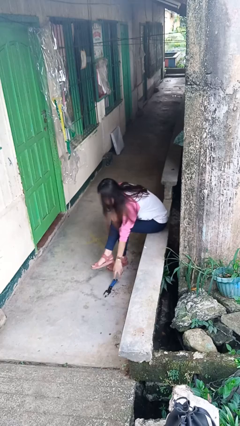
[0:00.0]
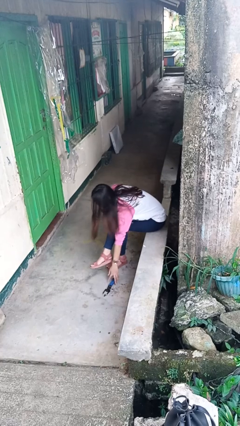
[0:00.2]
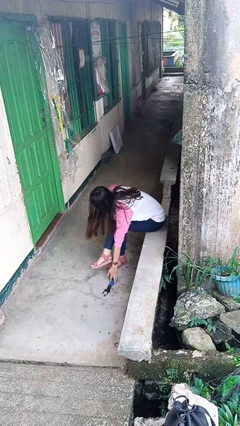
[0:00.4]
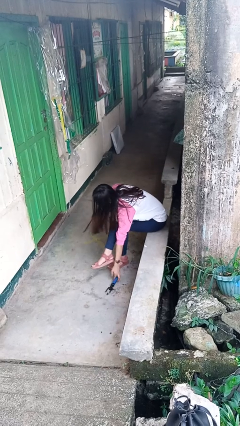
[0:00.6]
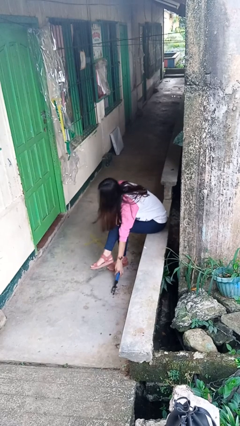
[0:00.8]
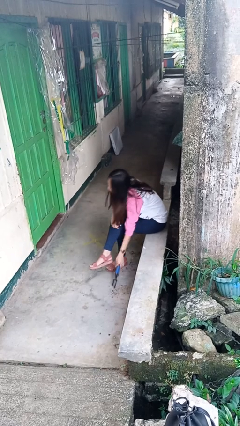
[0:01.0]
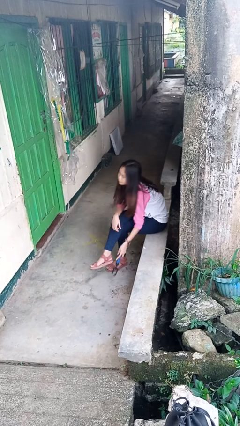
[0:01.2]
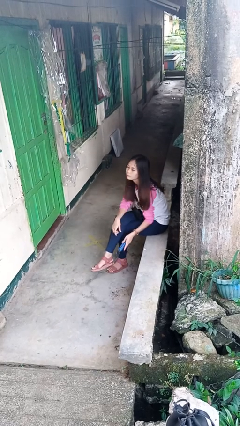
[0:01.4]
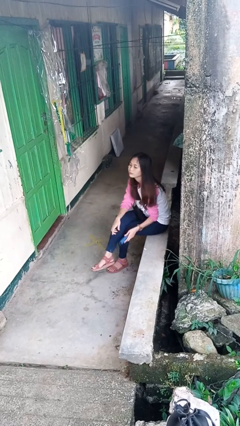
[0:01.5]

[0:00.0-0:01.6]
person picks up object from floor

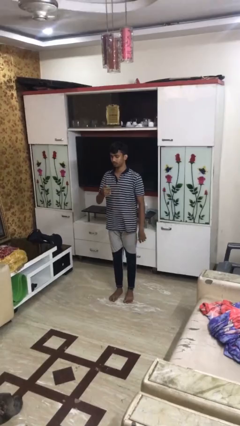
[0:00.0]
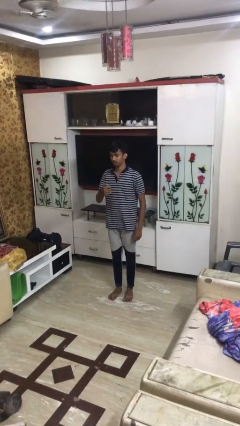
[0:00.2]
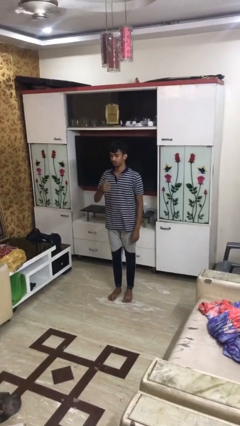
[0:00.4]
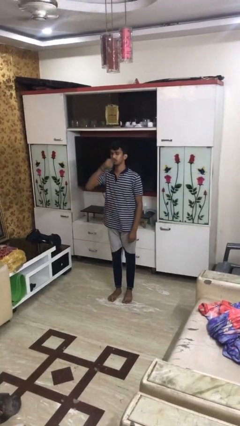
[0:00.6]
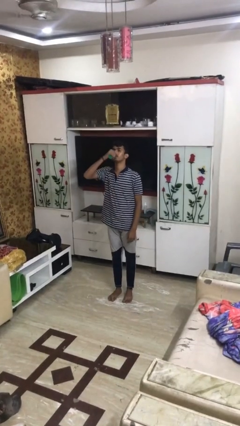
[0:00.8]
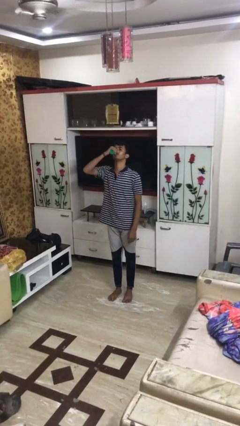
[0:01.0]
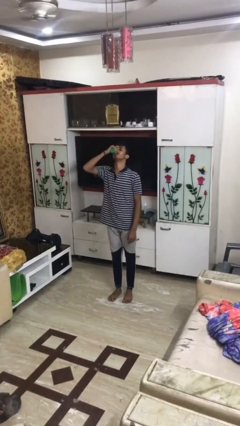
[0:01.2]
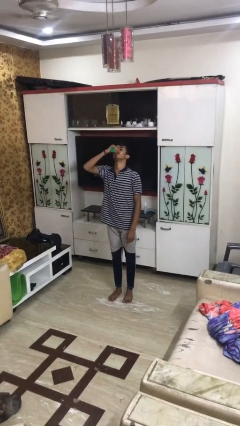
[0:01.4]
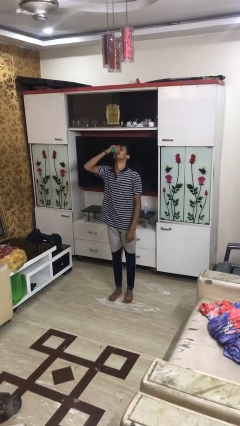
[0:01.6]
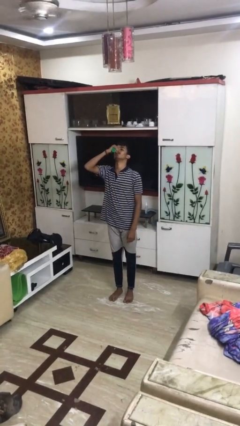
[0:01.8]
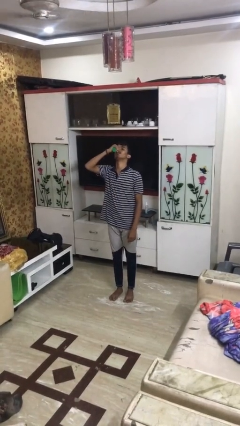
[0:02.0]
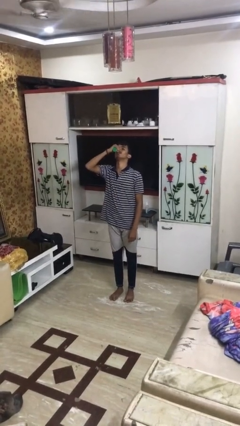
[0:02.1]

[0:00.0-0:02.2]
person drinks from beverage can

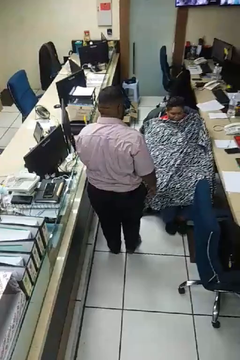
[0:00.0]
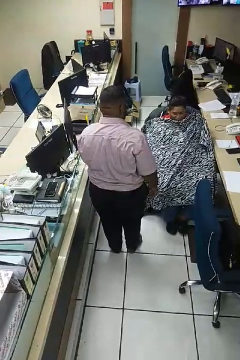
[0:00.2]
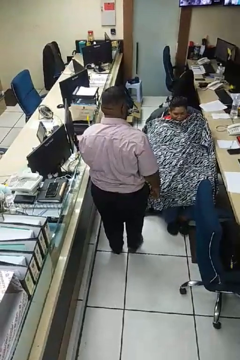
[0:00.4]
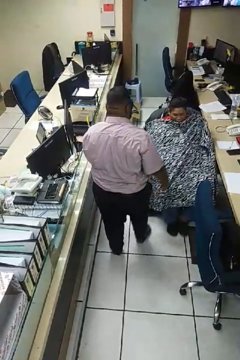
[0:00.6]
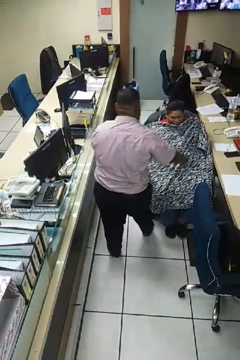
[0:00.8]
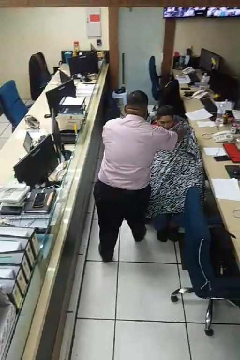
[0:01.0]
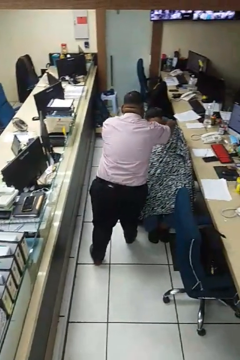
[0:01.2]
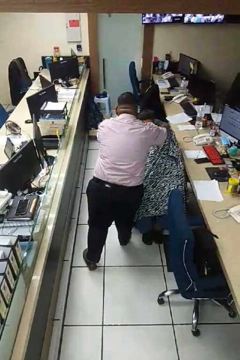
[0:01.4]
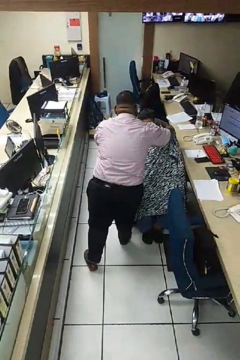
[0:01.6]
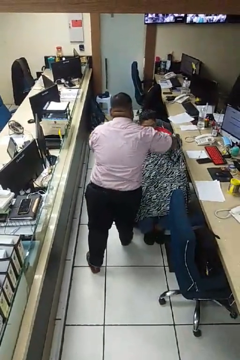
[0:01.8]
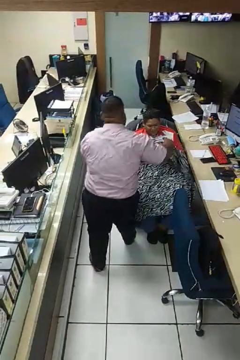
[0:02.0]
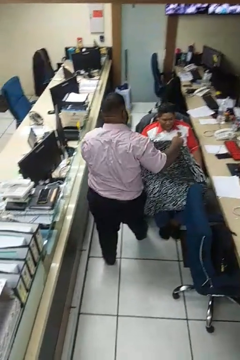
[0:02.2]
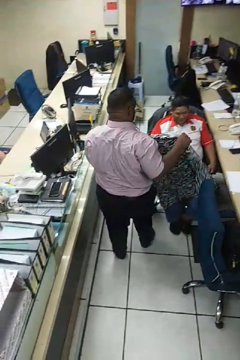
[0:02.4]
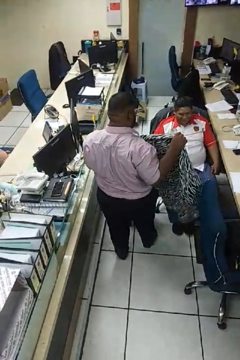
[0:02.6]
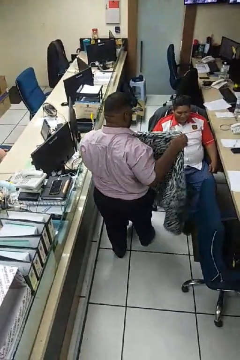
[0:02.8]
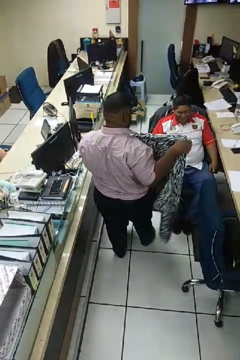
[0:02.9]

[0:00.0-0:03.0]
person uncovers friend with blanket

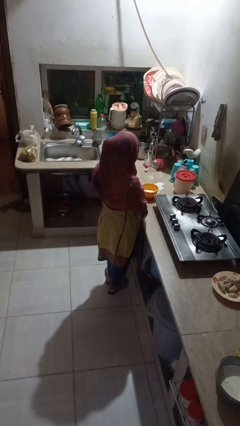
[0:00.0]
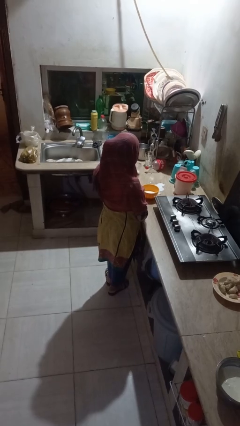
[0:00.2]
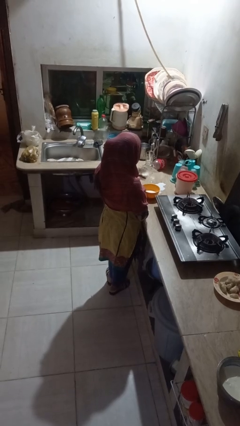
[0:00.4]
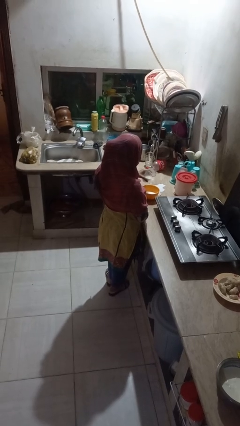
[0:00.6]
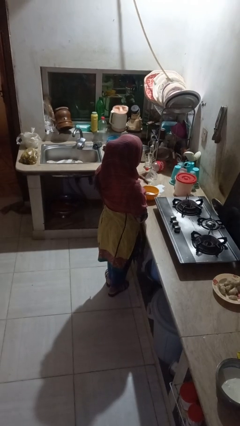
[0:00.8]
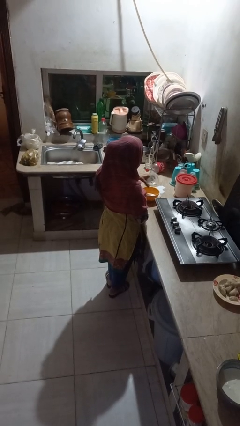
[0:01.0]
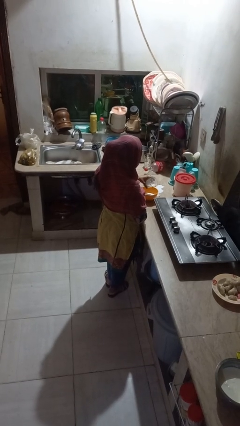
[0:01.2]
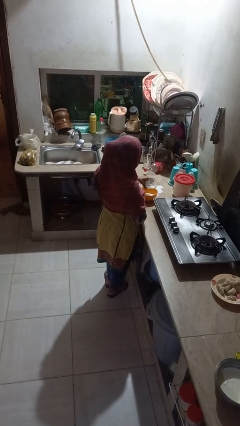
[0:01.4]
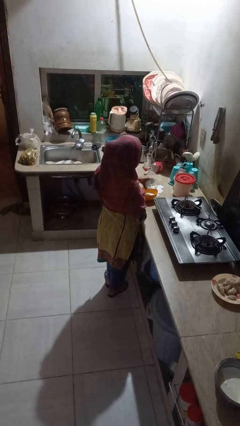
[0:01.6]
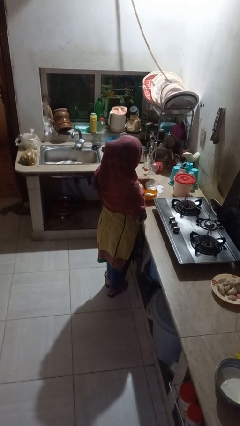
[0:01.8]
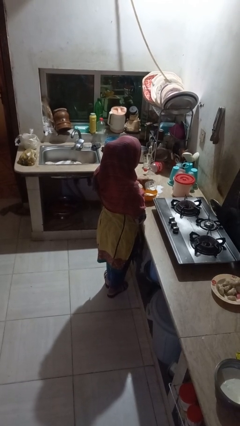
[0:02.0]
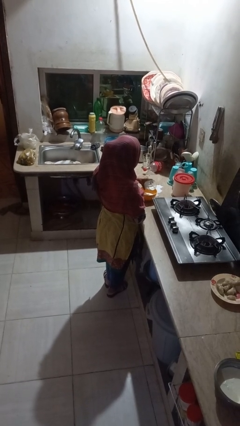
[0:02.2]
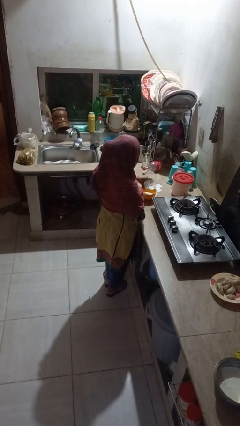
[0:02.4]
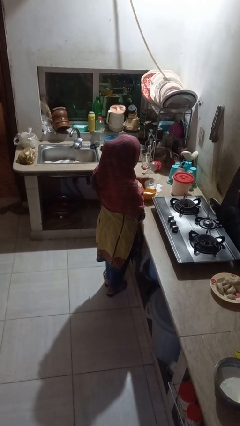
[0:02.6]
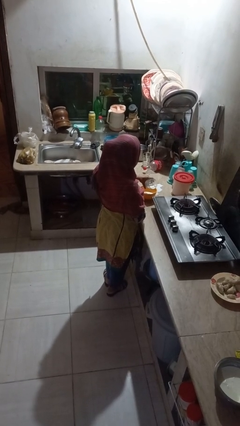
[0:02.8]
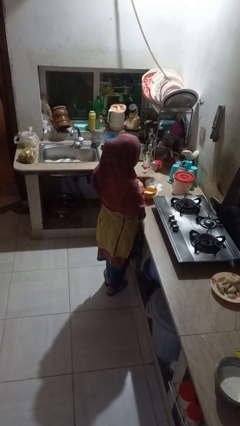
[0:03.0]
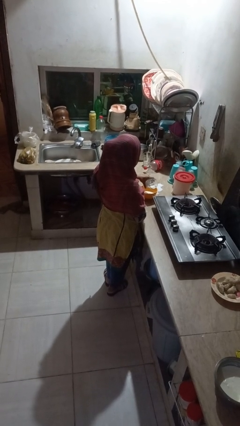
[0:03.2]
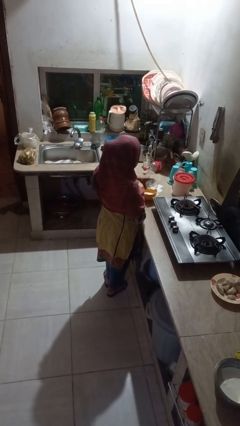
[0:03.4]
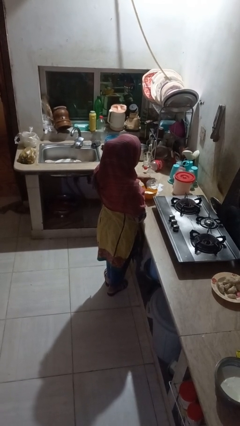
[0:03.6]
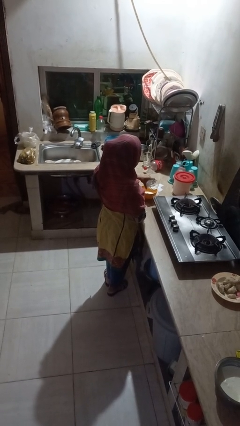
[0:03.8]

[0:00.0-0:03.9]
person pours into bowl

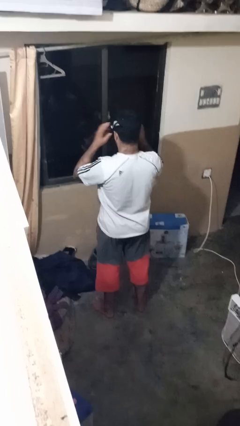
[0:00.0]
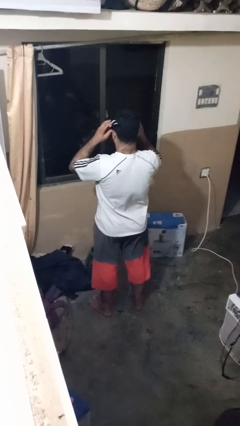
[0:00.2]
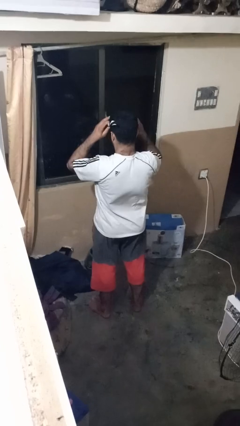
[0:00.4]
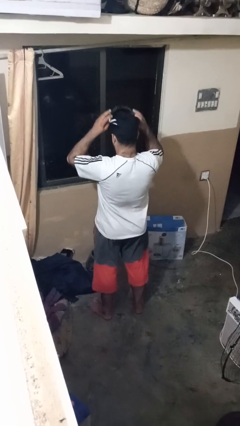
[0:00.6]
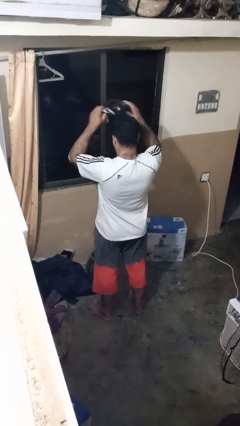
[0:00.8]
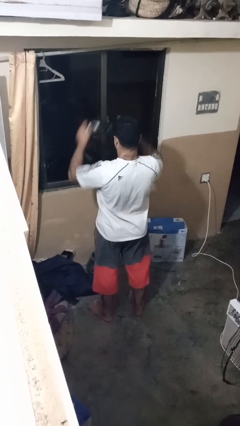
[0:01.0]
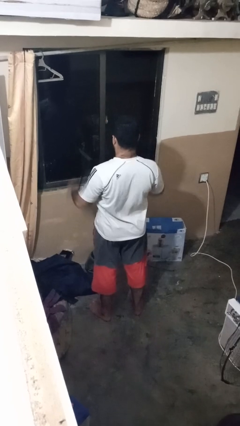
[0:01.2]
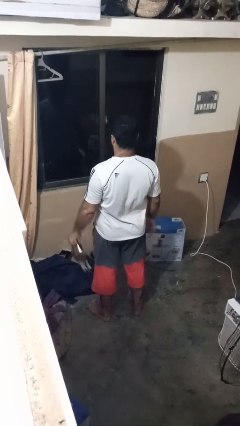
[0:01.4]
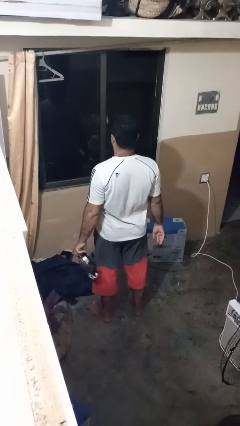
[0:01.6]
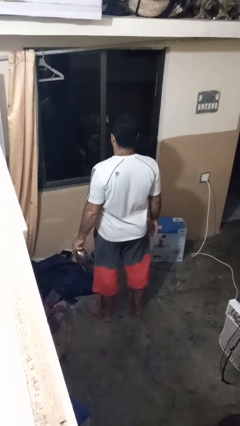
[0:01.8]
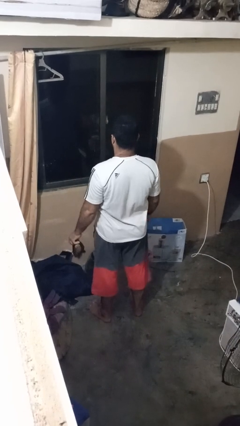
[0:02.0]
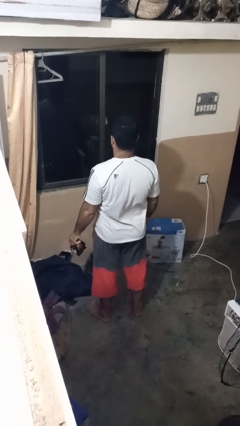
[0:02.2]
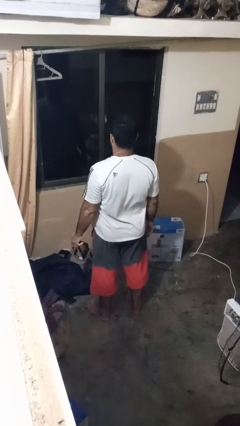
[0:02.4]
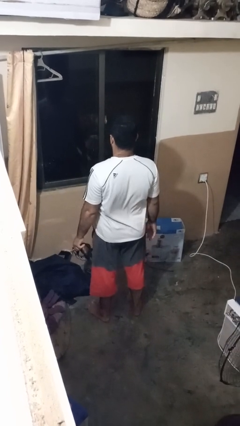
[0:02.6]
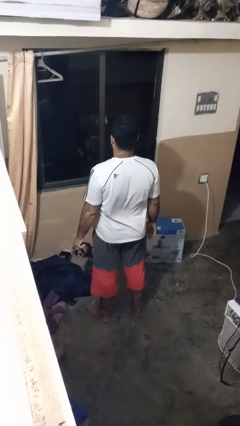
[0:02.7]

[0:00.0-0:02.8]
person takes off sunglasses

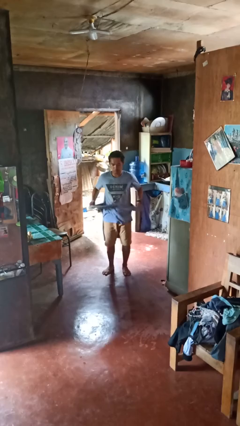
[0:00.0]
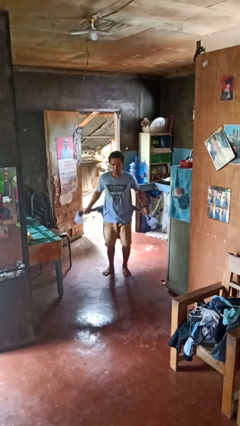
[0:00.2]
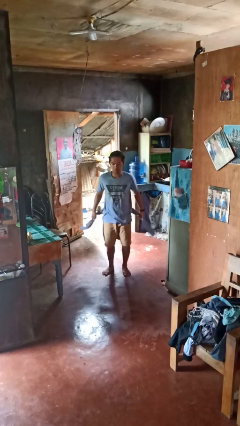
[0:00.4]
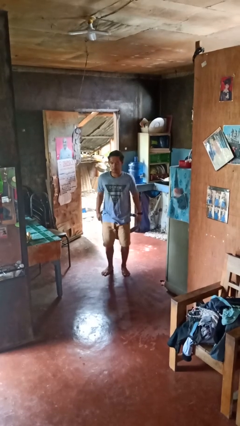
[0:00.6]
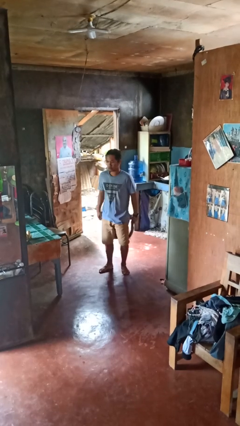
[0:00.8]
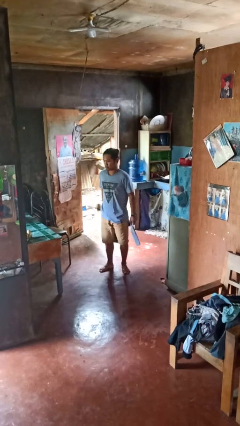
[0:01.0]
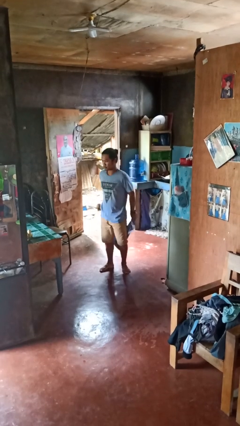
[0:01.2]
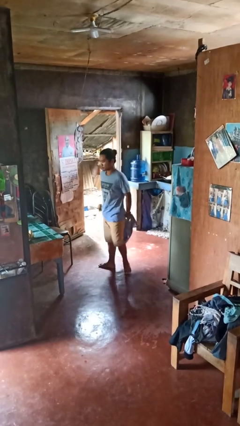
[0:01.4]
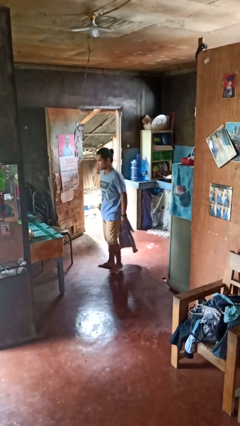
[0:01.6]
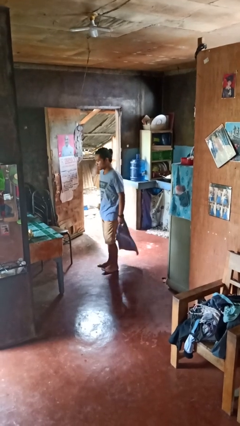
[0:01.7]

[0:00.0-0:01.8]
person unties jacket around waist

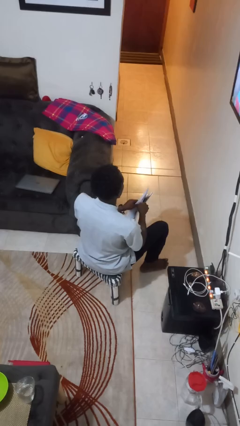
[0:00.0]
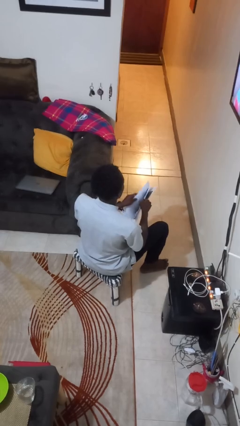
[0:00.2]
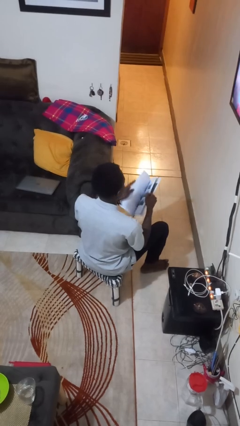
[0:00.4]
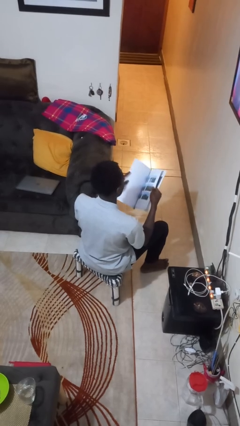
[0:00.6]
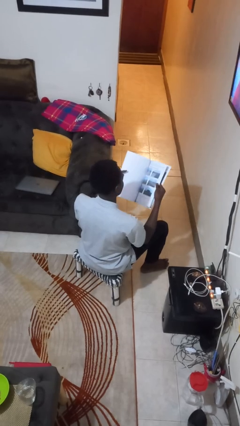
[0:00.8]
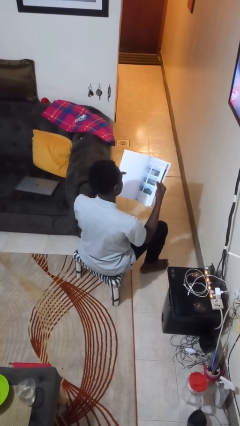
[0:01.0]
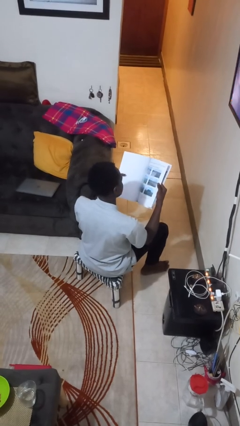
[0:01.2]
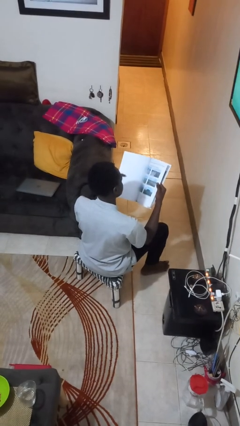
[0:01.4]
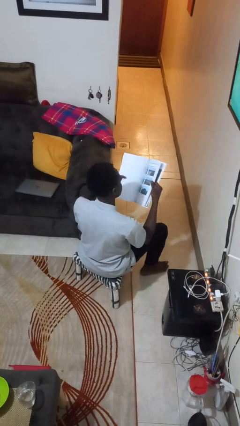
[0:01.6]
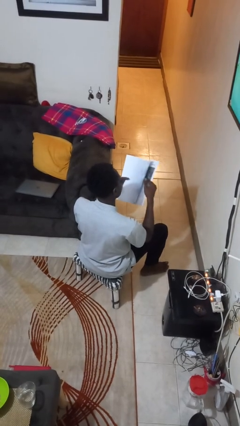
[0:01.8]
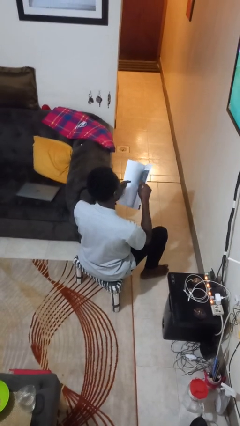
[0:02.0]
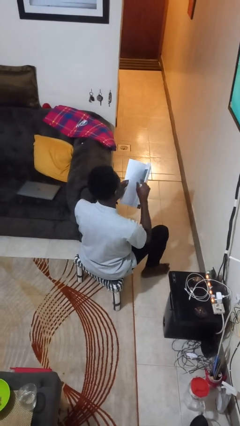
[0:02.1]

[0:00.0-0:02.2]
person reads magazine

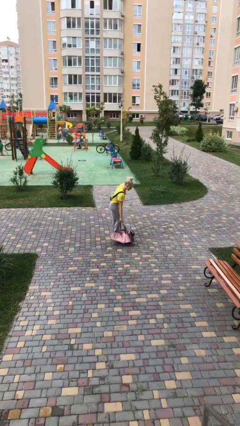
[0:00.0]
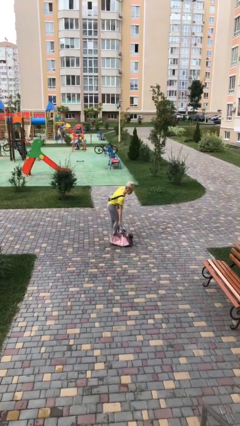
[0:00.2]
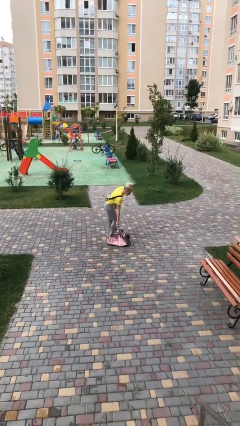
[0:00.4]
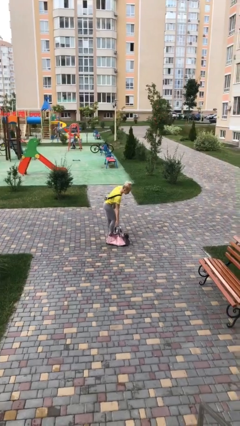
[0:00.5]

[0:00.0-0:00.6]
person puts down object on floor
